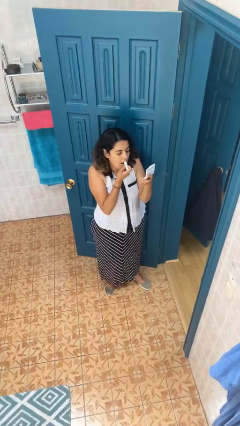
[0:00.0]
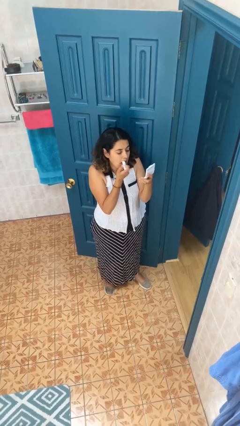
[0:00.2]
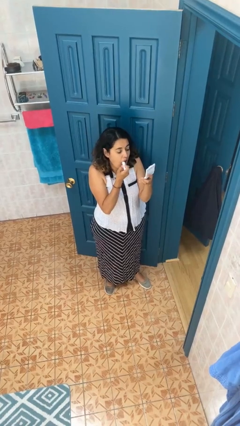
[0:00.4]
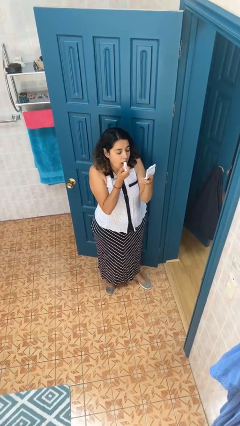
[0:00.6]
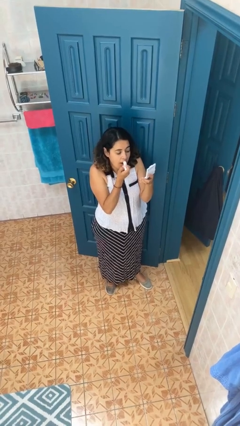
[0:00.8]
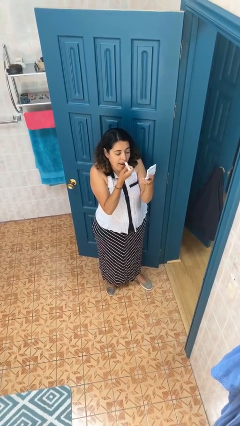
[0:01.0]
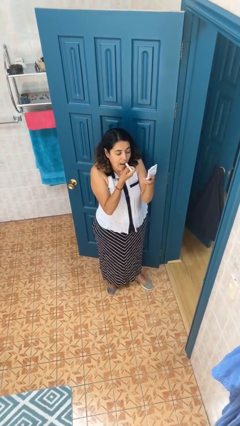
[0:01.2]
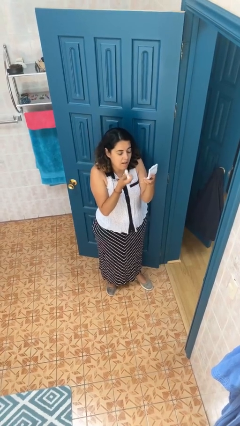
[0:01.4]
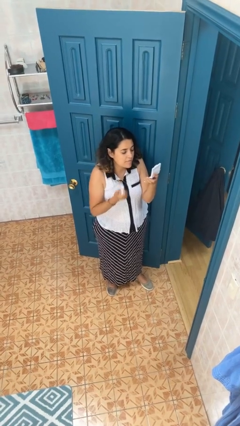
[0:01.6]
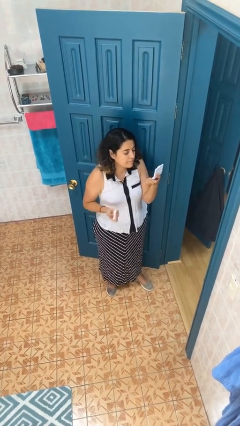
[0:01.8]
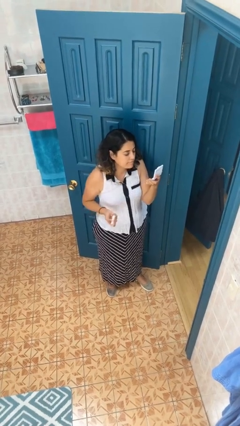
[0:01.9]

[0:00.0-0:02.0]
person applies lip makeup

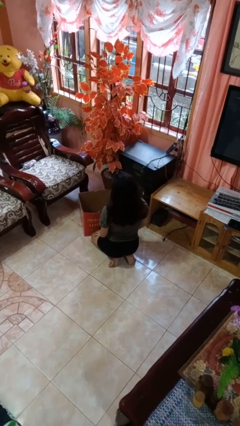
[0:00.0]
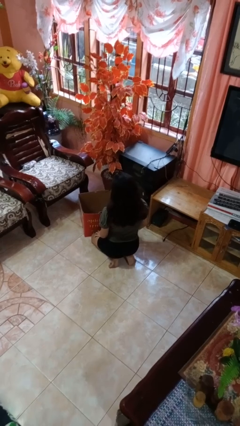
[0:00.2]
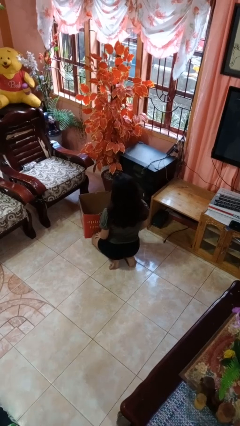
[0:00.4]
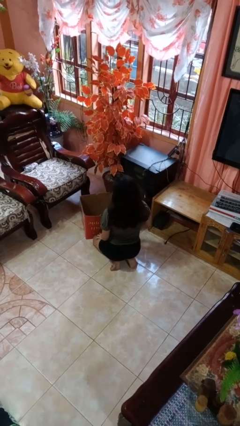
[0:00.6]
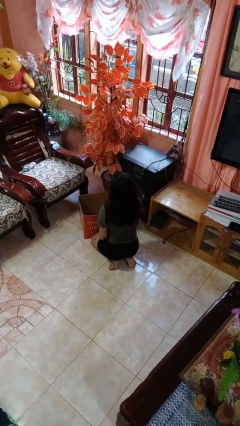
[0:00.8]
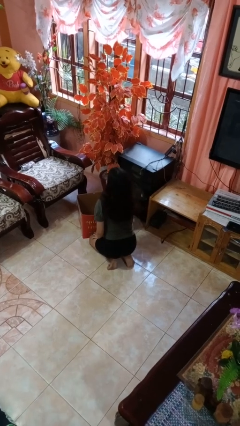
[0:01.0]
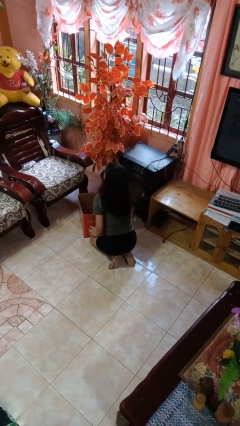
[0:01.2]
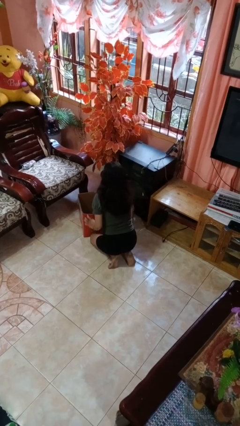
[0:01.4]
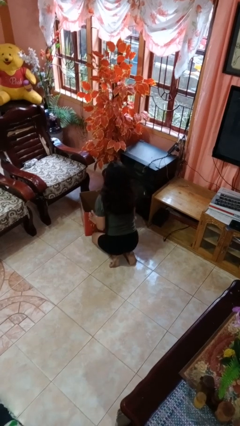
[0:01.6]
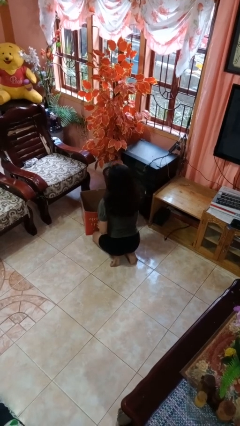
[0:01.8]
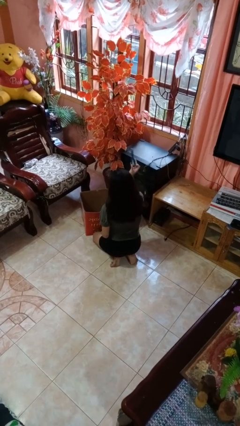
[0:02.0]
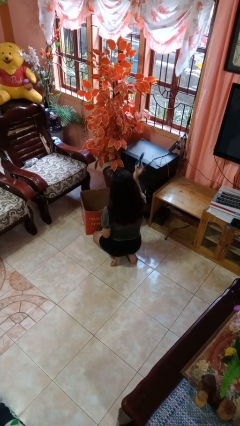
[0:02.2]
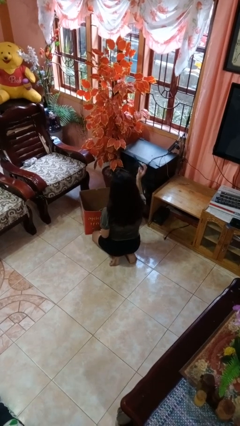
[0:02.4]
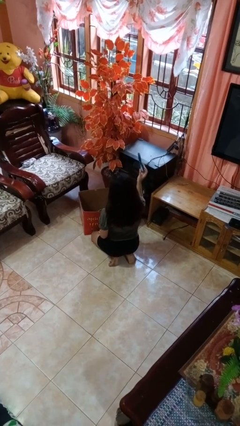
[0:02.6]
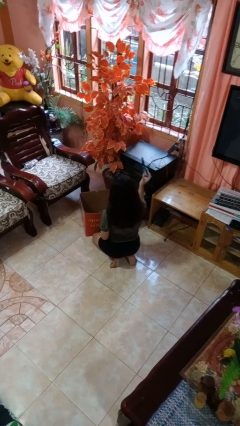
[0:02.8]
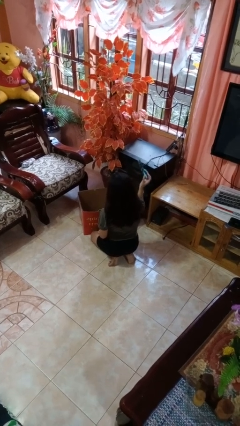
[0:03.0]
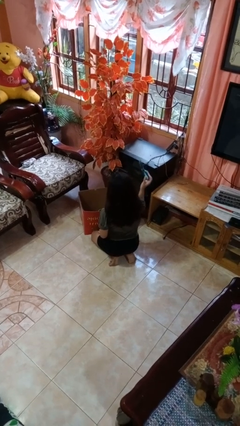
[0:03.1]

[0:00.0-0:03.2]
person takes object from box

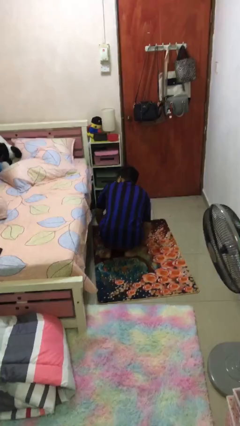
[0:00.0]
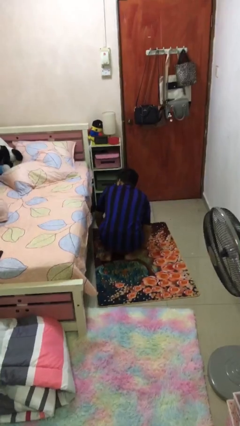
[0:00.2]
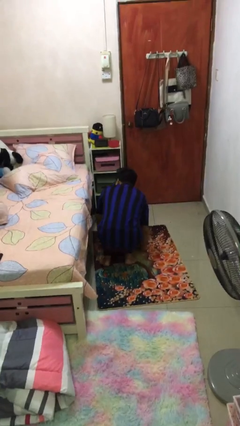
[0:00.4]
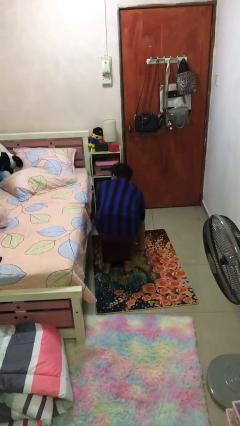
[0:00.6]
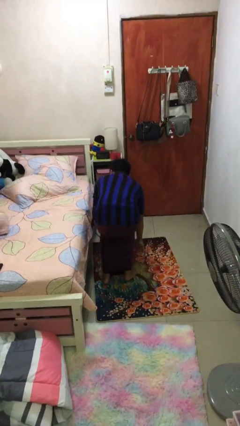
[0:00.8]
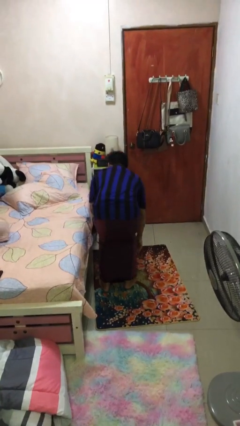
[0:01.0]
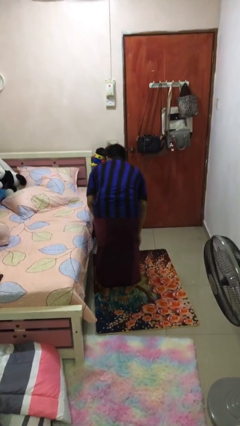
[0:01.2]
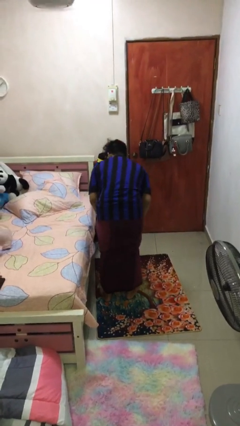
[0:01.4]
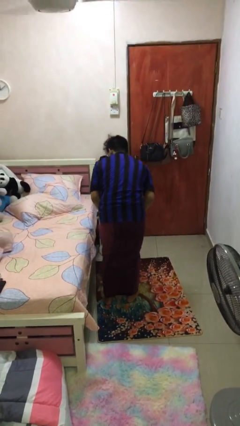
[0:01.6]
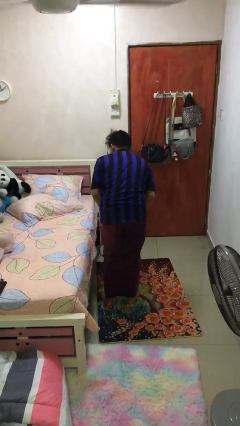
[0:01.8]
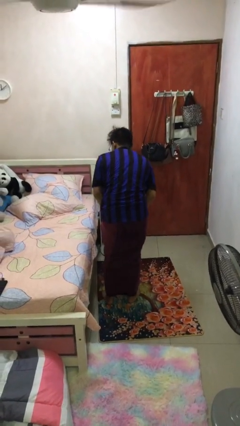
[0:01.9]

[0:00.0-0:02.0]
person stands up from floor

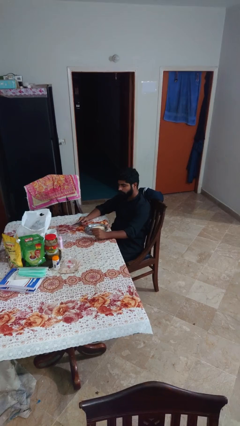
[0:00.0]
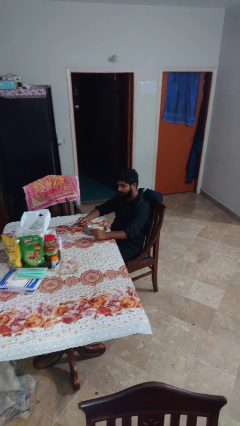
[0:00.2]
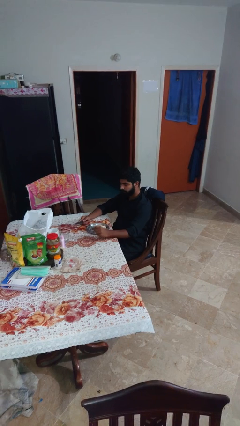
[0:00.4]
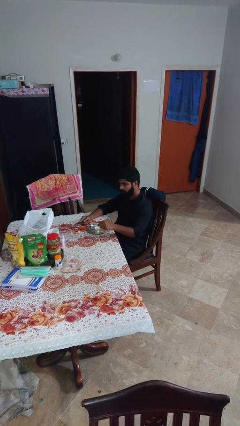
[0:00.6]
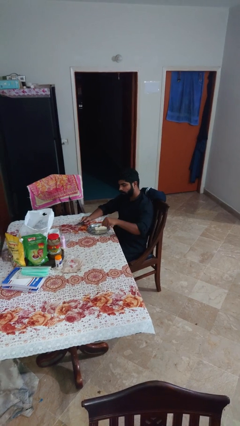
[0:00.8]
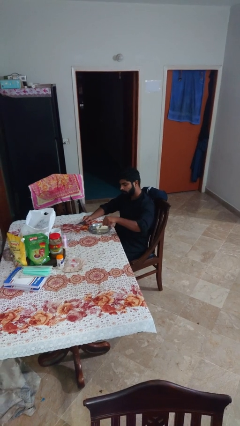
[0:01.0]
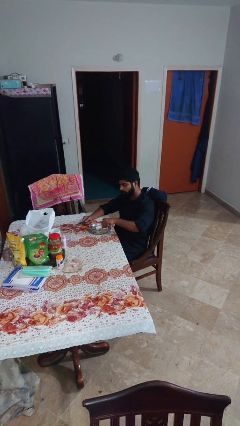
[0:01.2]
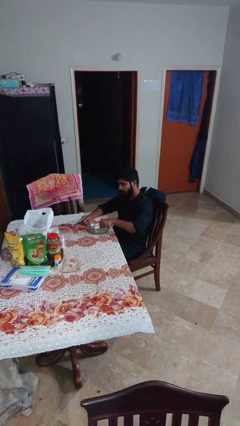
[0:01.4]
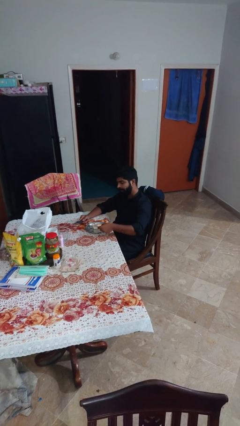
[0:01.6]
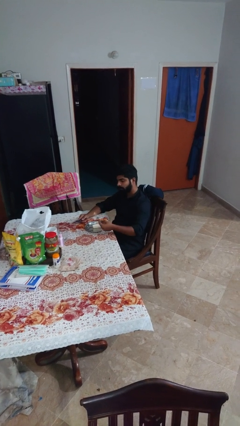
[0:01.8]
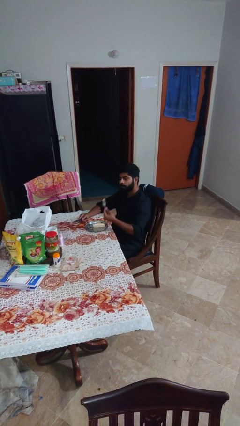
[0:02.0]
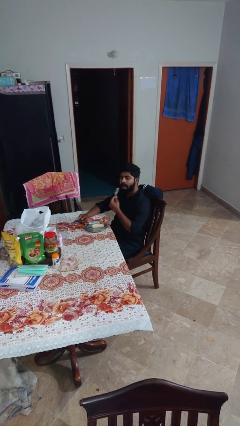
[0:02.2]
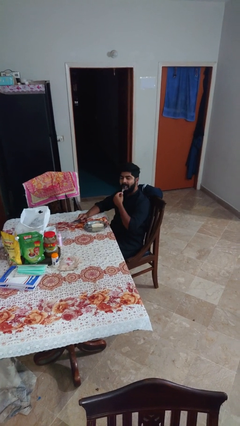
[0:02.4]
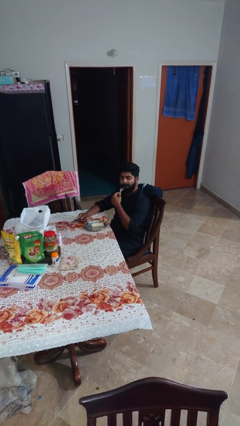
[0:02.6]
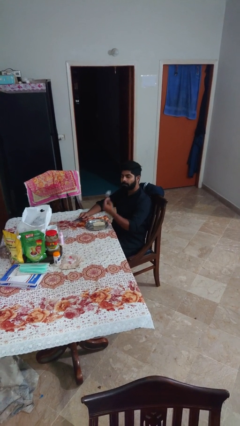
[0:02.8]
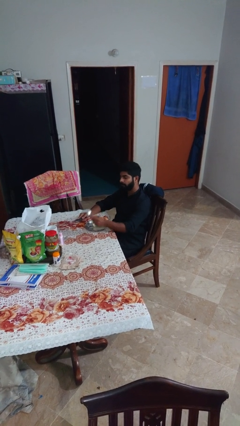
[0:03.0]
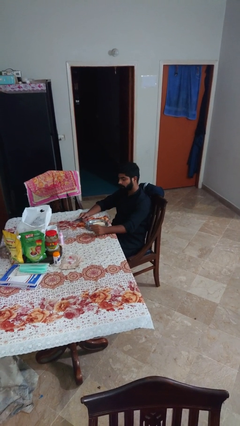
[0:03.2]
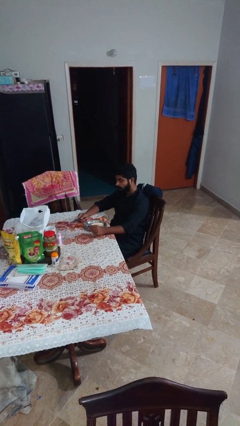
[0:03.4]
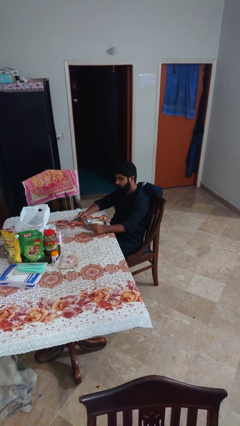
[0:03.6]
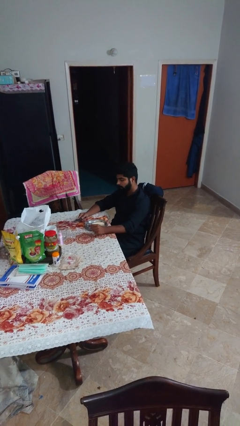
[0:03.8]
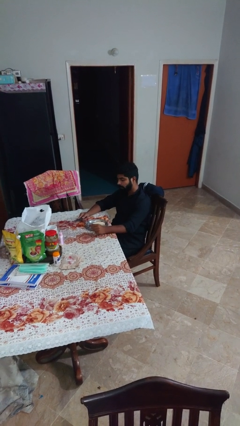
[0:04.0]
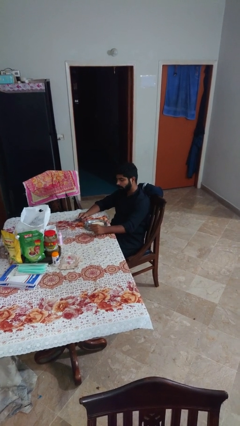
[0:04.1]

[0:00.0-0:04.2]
person eats with utensil

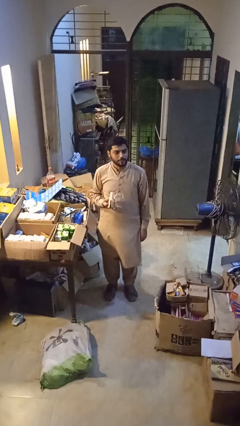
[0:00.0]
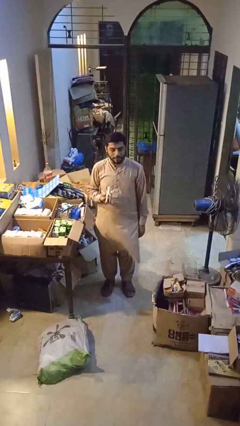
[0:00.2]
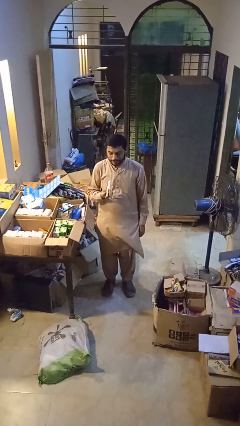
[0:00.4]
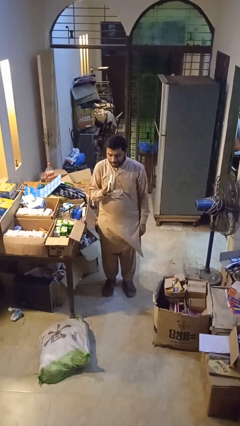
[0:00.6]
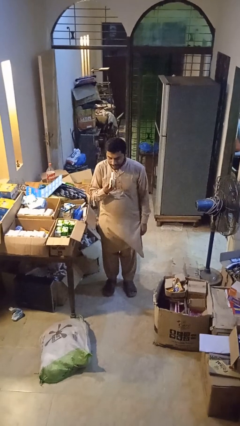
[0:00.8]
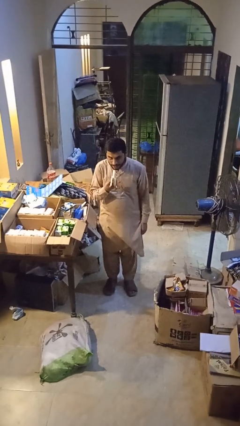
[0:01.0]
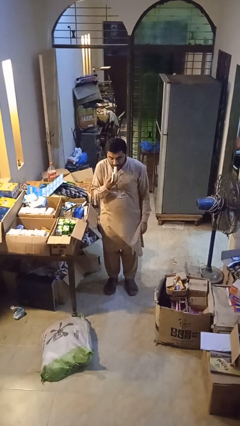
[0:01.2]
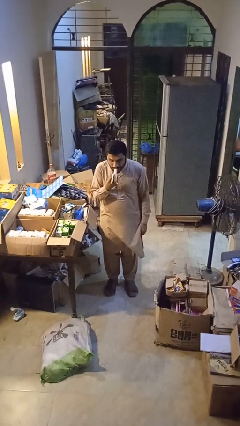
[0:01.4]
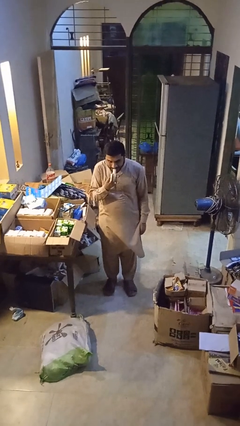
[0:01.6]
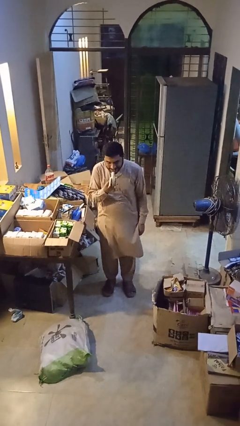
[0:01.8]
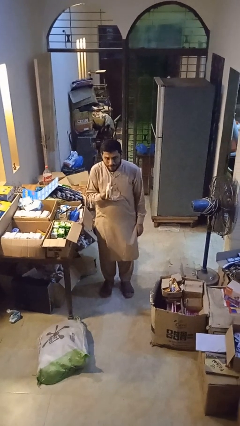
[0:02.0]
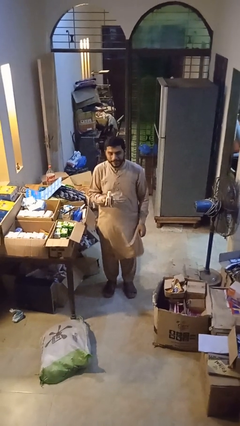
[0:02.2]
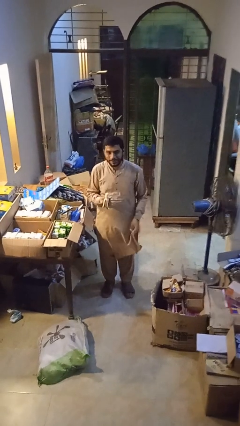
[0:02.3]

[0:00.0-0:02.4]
person eats banana

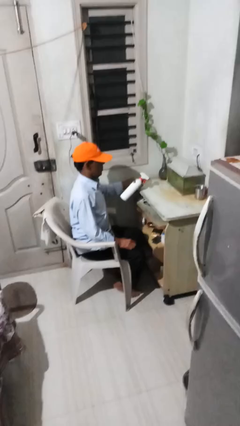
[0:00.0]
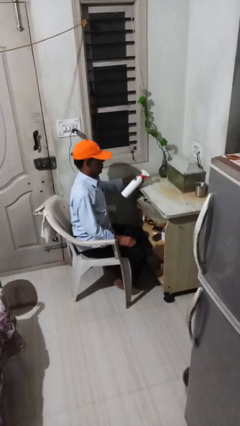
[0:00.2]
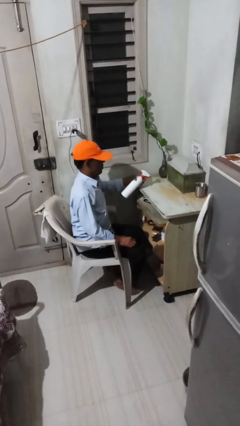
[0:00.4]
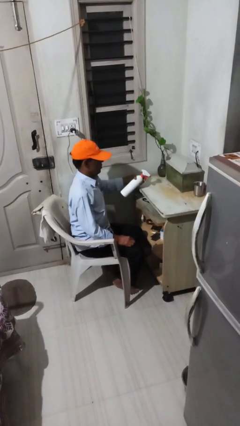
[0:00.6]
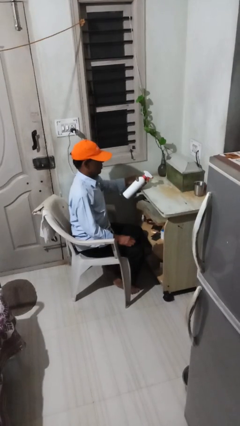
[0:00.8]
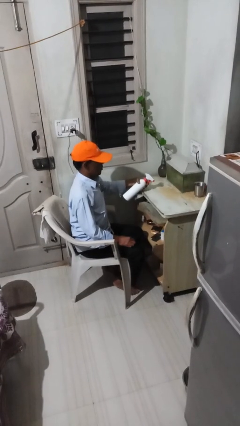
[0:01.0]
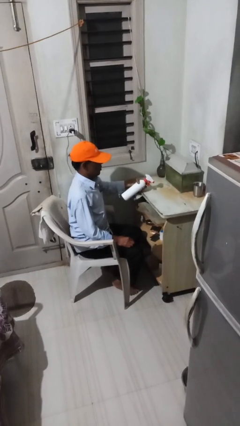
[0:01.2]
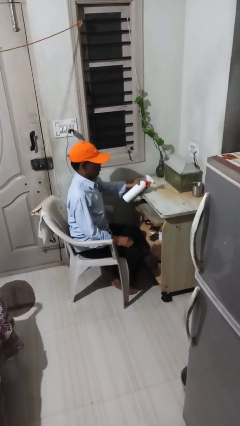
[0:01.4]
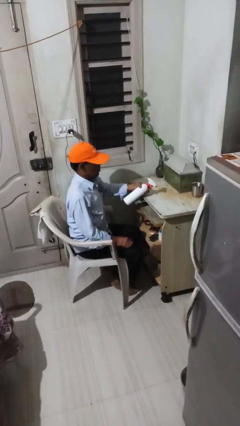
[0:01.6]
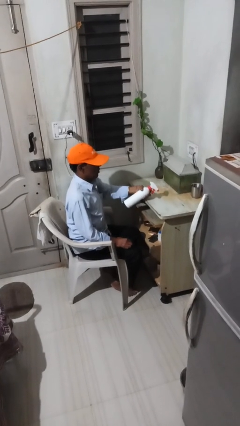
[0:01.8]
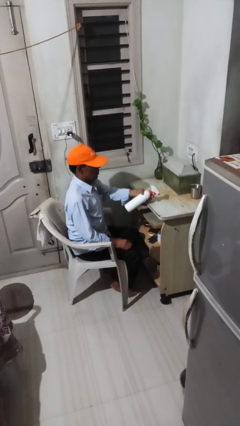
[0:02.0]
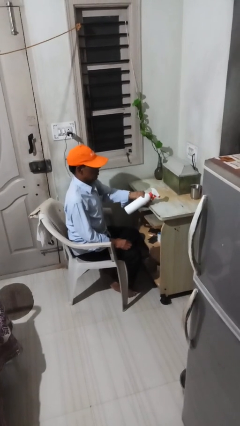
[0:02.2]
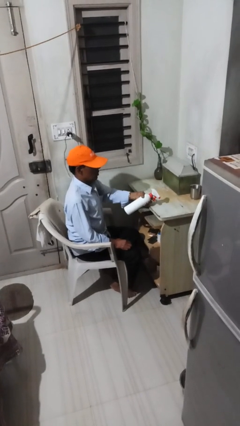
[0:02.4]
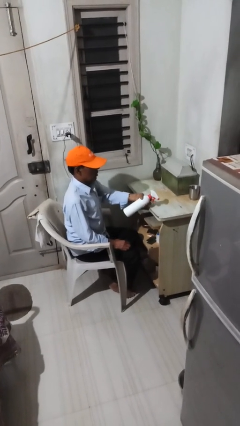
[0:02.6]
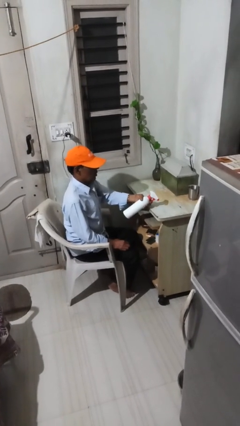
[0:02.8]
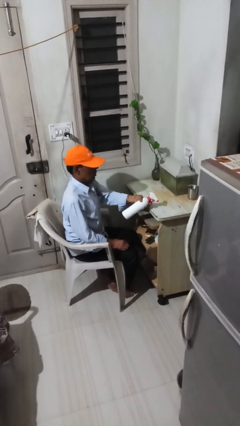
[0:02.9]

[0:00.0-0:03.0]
person sprays from bottle

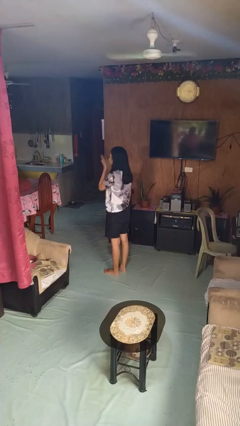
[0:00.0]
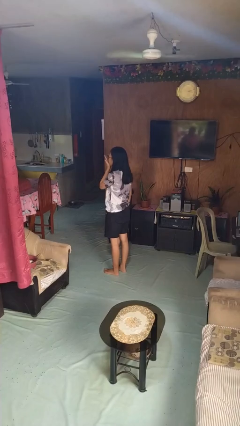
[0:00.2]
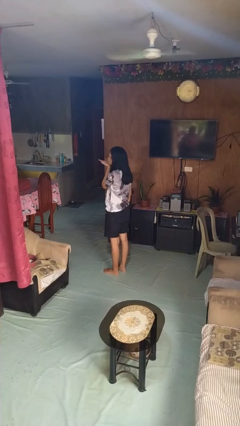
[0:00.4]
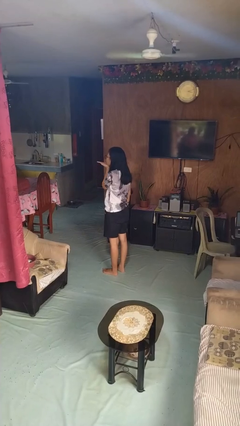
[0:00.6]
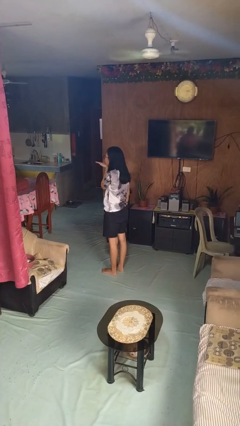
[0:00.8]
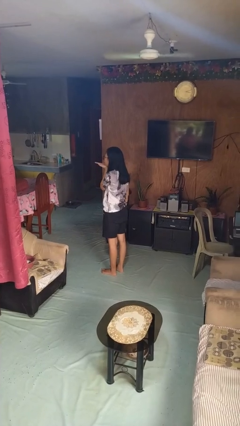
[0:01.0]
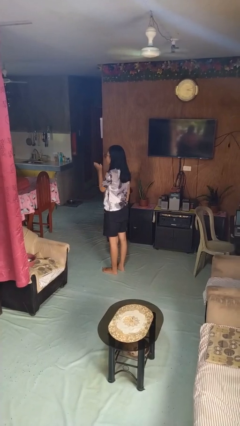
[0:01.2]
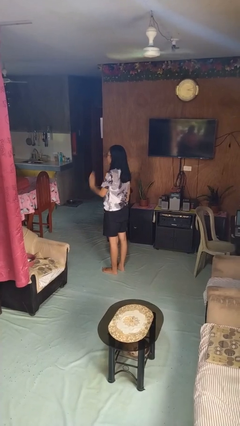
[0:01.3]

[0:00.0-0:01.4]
person gestures blow kiss
